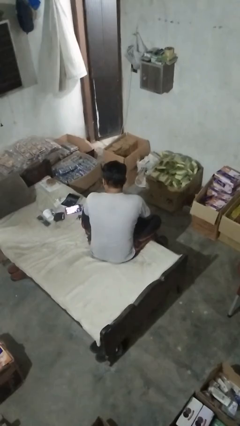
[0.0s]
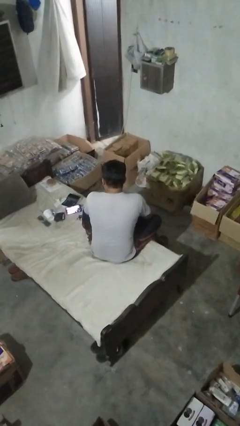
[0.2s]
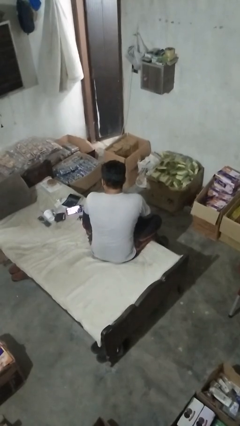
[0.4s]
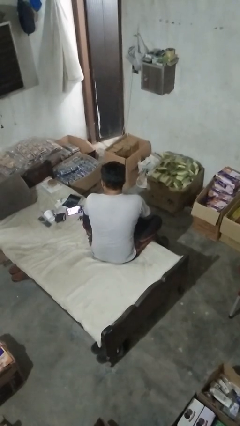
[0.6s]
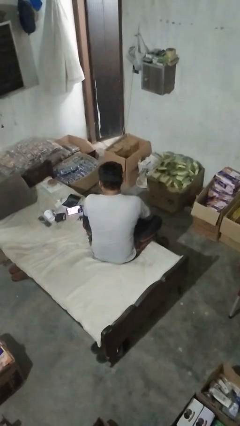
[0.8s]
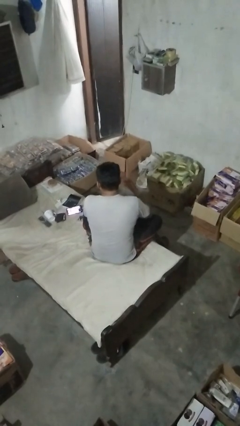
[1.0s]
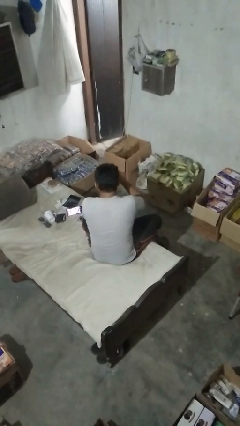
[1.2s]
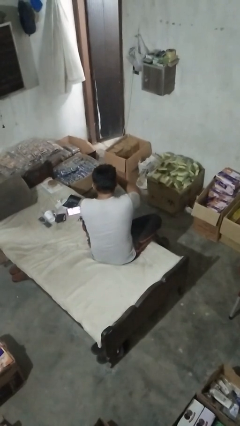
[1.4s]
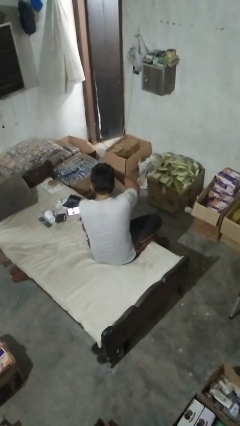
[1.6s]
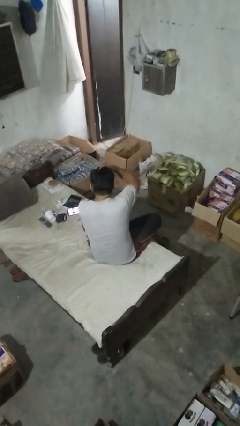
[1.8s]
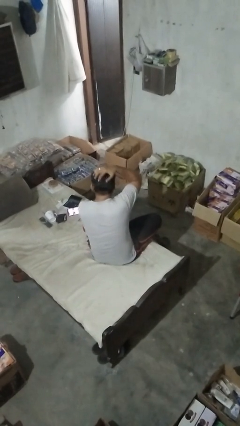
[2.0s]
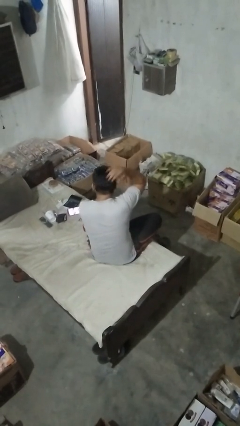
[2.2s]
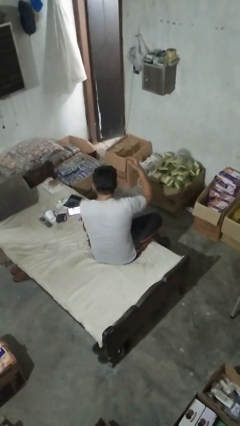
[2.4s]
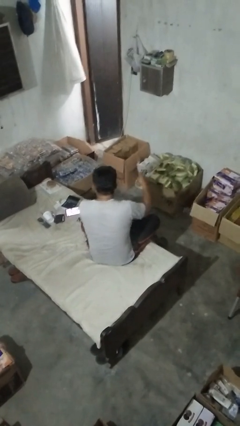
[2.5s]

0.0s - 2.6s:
person strokes hair

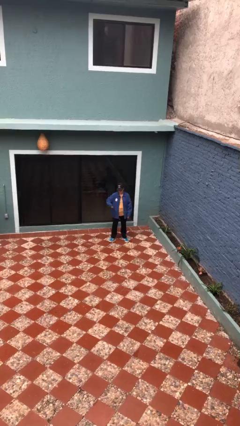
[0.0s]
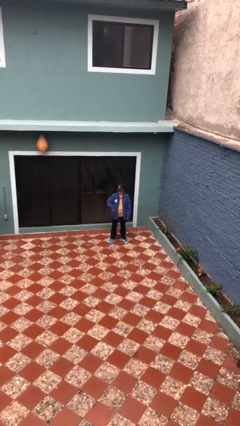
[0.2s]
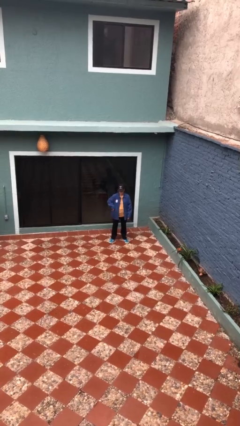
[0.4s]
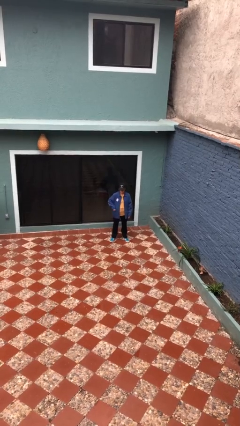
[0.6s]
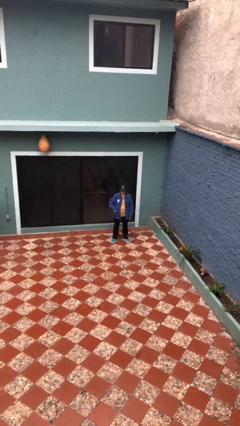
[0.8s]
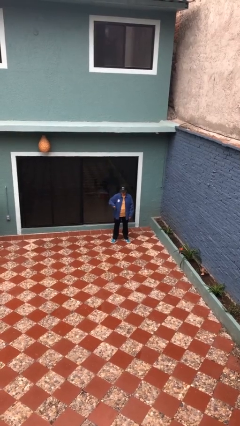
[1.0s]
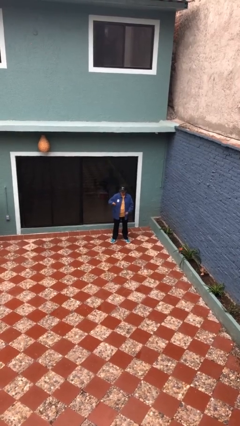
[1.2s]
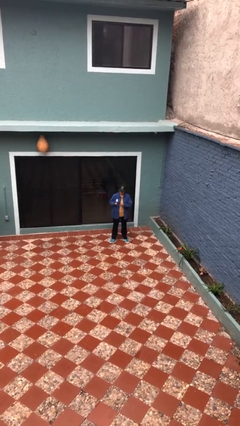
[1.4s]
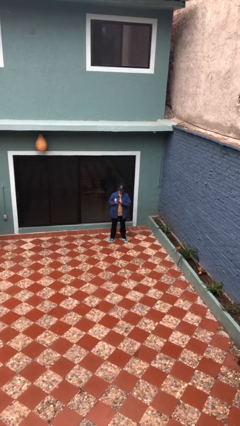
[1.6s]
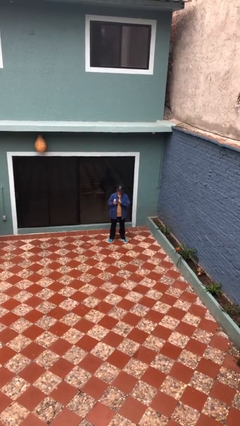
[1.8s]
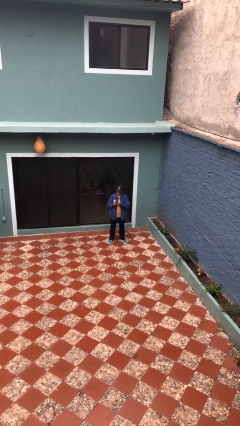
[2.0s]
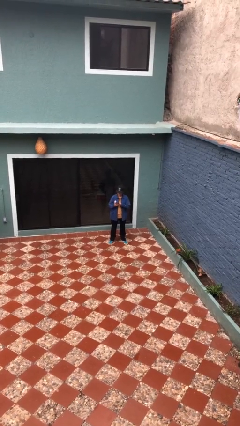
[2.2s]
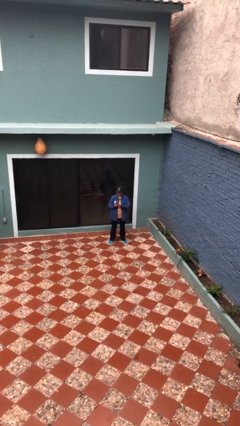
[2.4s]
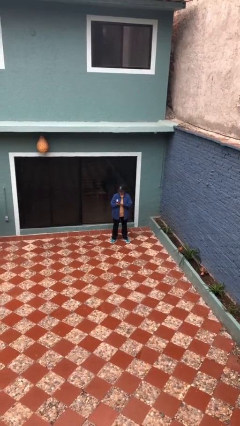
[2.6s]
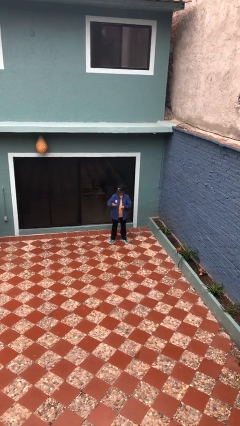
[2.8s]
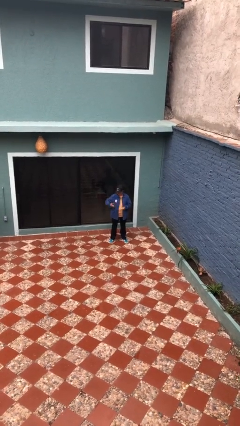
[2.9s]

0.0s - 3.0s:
person takes phone from pocket

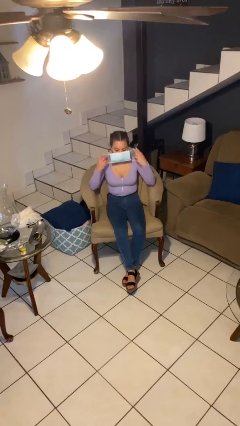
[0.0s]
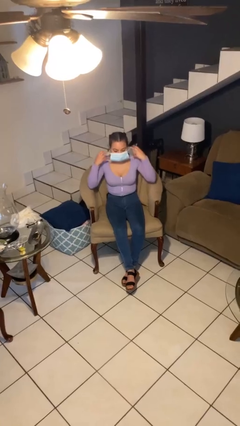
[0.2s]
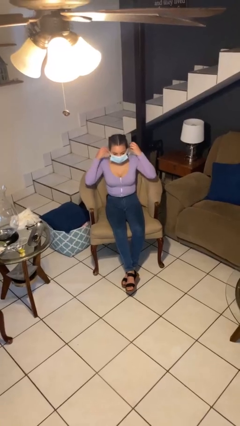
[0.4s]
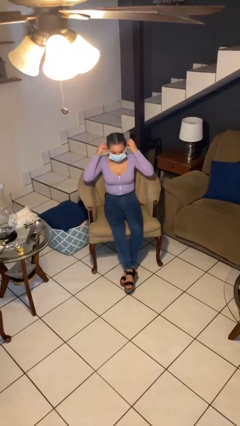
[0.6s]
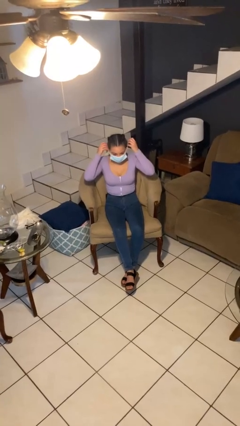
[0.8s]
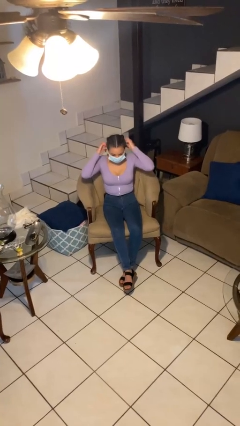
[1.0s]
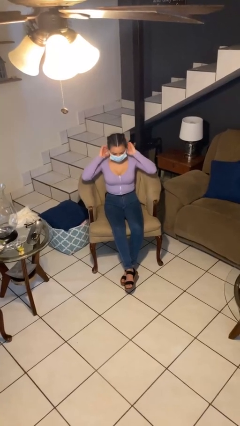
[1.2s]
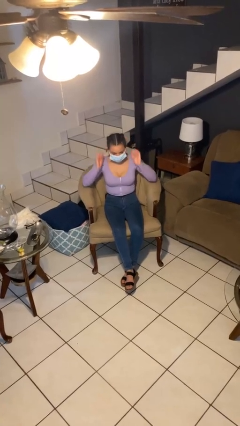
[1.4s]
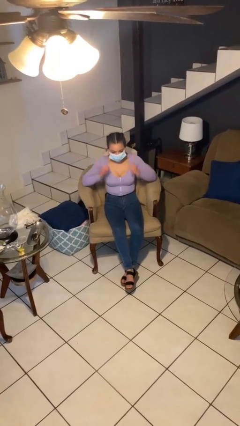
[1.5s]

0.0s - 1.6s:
person puts on facemask

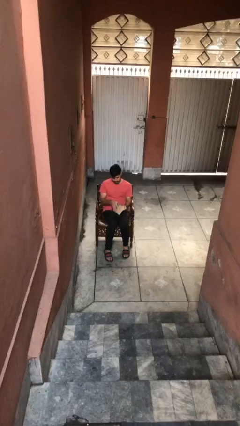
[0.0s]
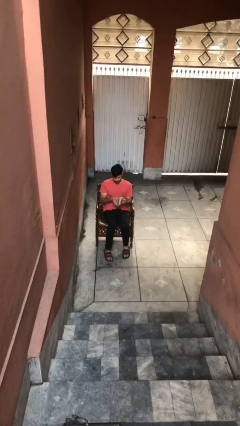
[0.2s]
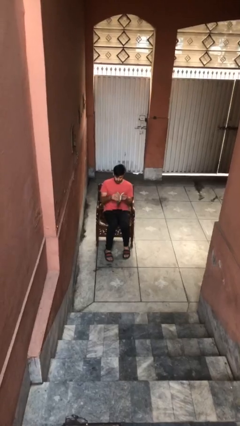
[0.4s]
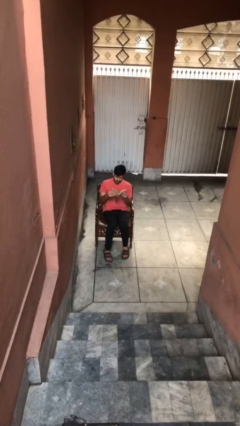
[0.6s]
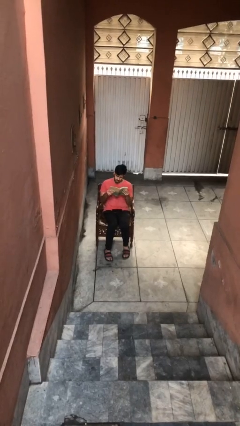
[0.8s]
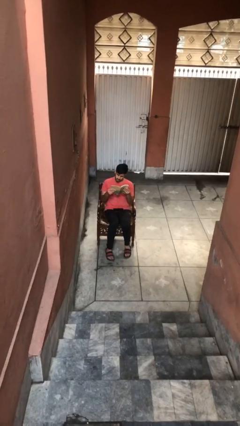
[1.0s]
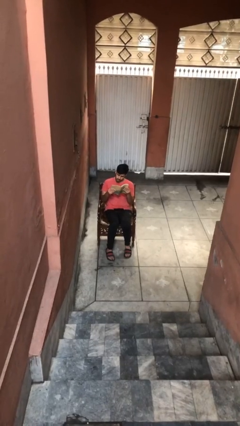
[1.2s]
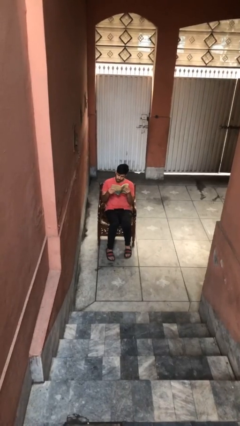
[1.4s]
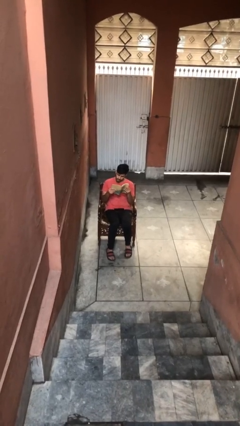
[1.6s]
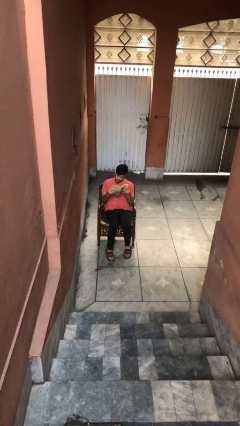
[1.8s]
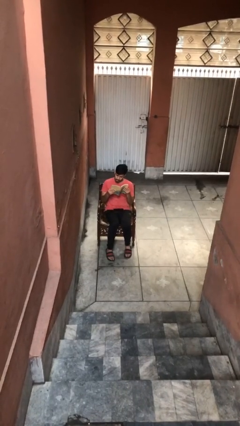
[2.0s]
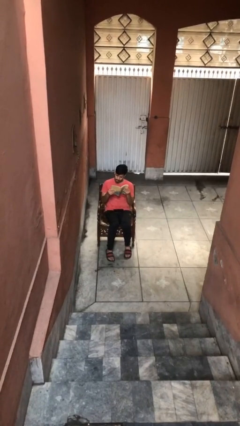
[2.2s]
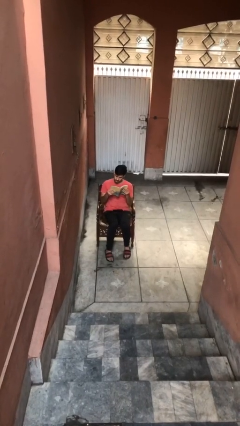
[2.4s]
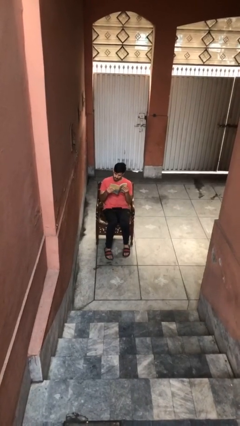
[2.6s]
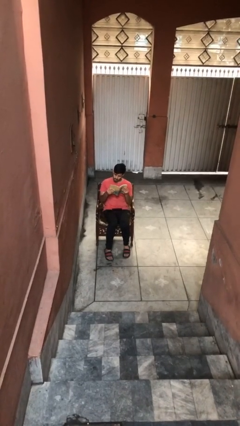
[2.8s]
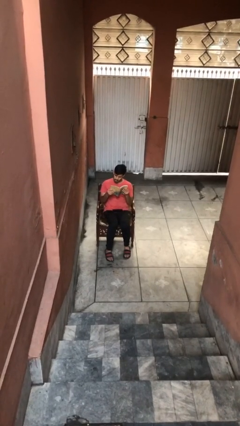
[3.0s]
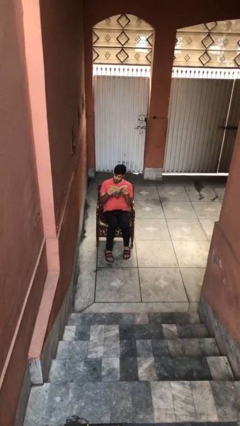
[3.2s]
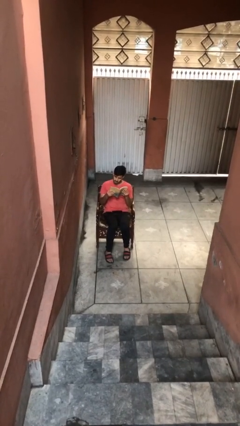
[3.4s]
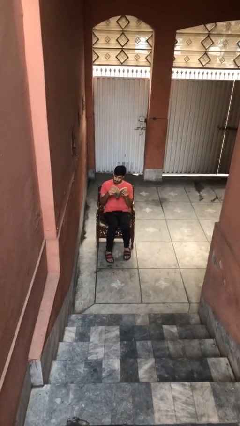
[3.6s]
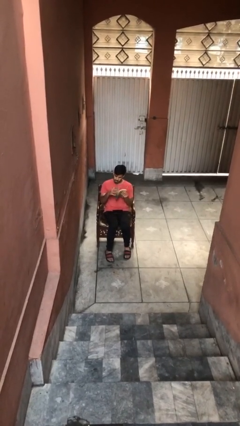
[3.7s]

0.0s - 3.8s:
person reads document

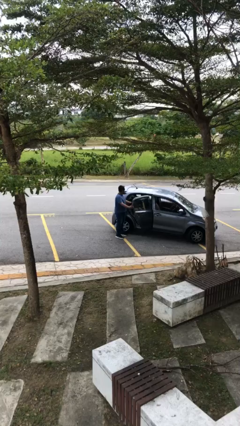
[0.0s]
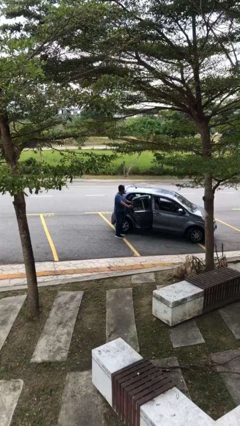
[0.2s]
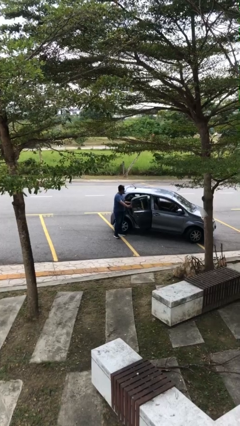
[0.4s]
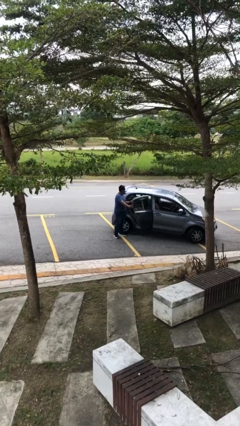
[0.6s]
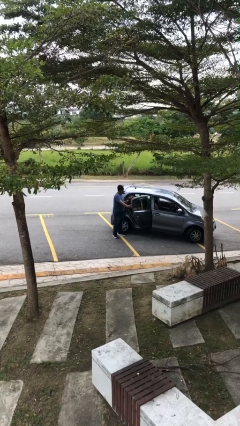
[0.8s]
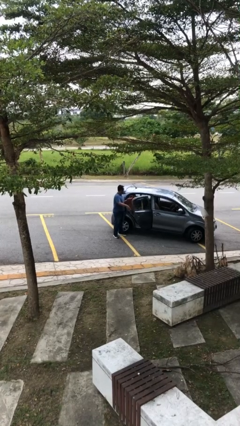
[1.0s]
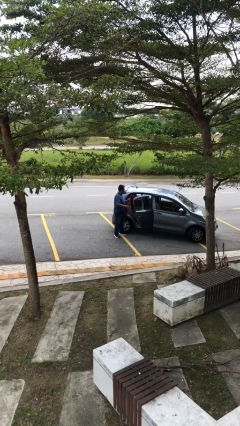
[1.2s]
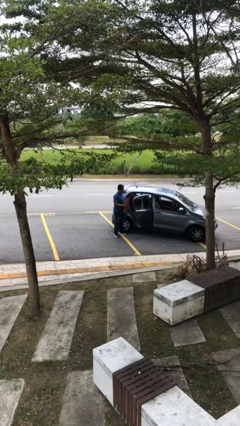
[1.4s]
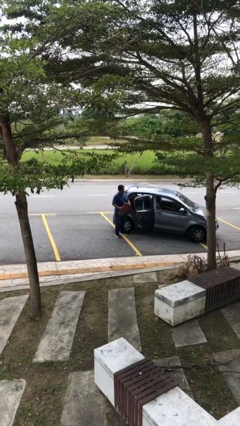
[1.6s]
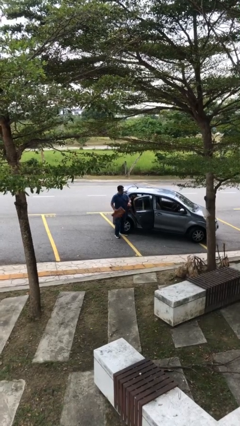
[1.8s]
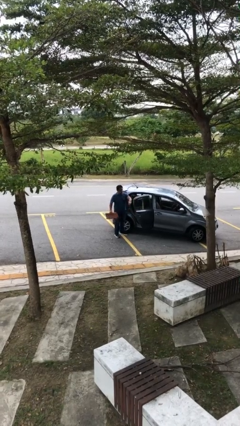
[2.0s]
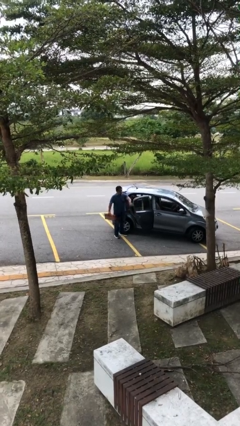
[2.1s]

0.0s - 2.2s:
person unloads car

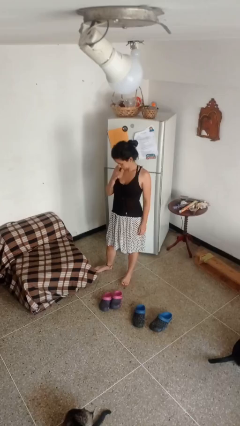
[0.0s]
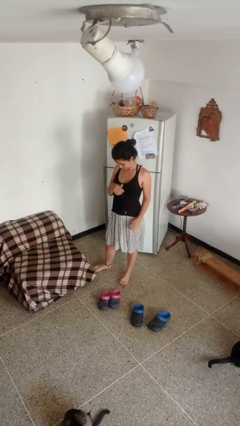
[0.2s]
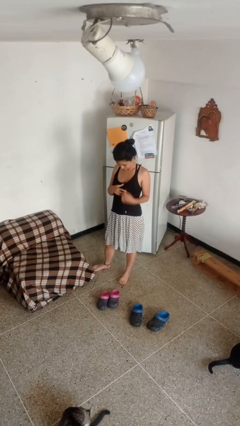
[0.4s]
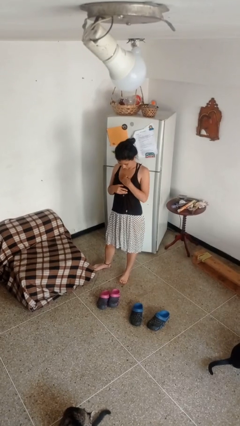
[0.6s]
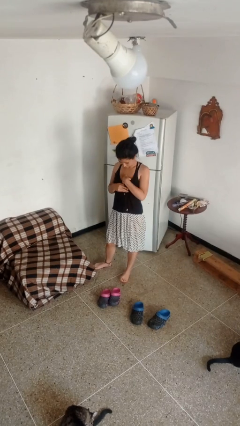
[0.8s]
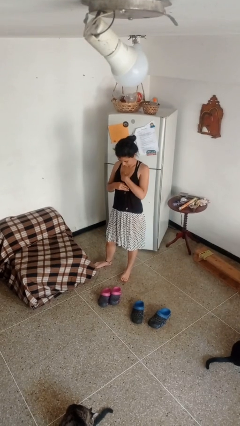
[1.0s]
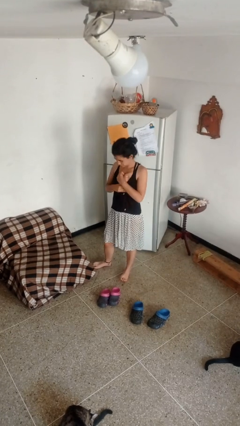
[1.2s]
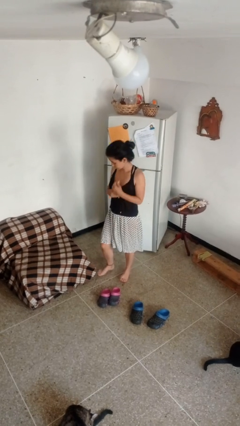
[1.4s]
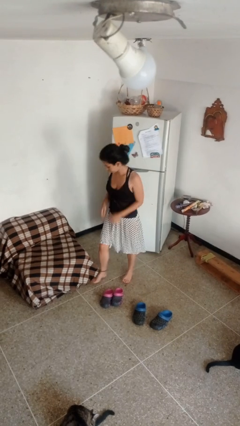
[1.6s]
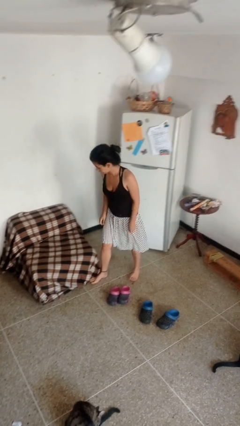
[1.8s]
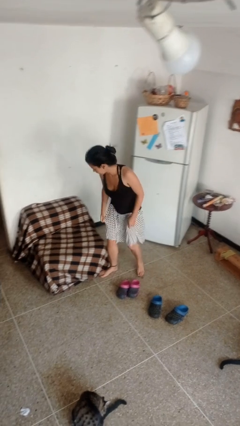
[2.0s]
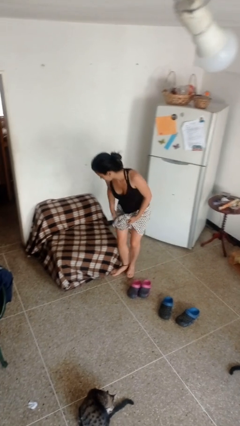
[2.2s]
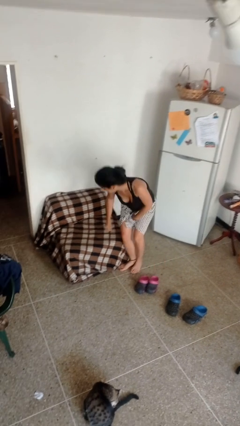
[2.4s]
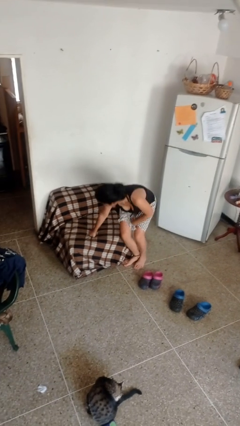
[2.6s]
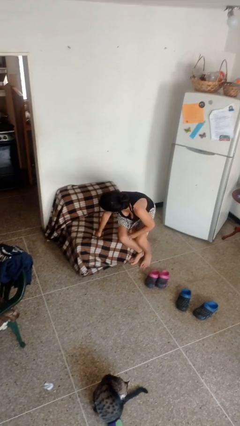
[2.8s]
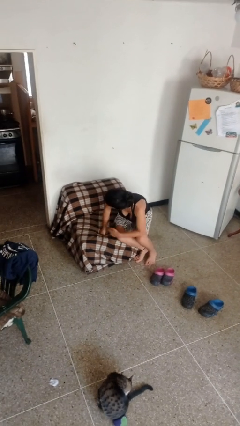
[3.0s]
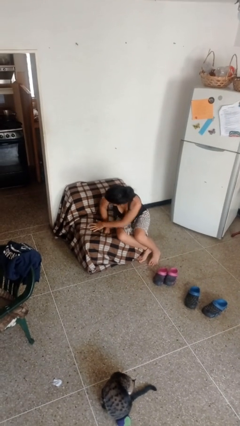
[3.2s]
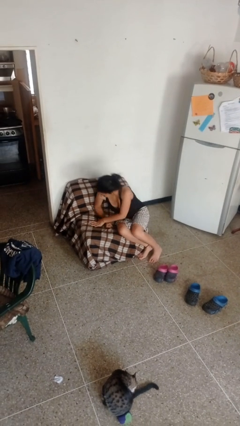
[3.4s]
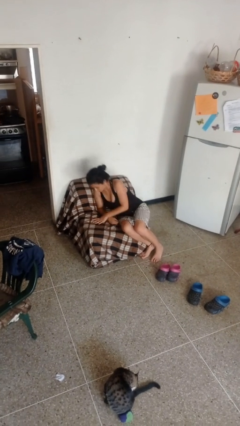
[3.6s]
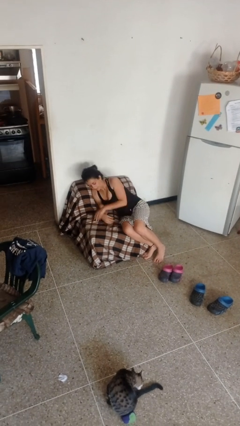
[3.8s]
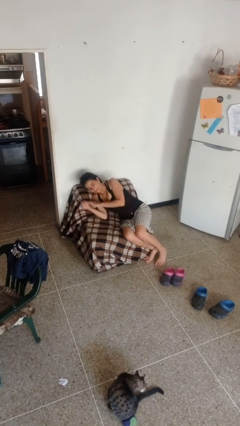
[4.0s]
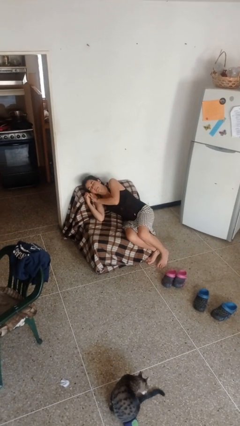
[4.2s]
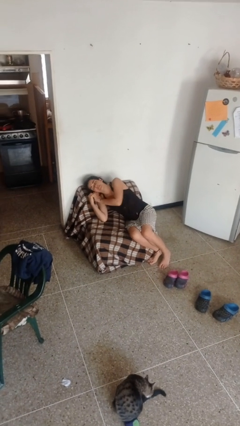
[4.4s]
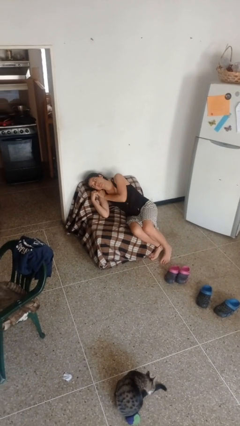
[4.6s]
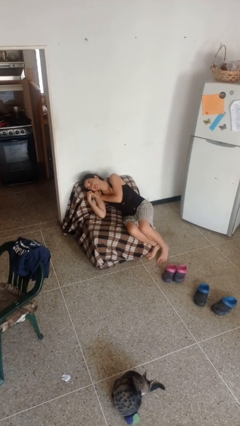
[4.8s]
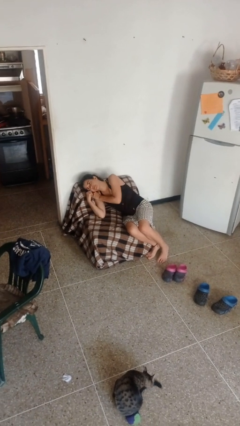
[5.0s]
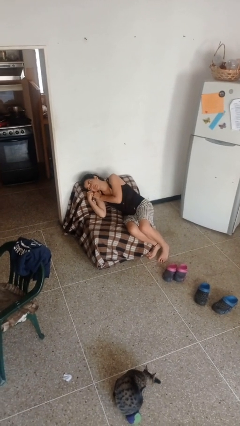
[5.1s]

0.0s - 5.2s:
person lies down on couch
